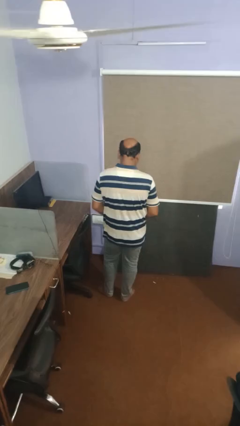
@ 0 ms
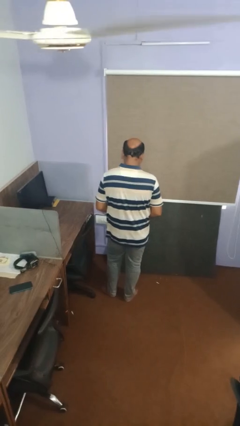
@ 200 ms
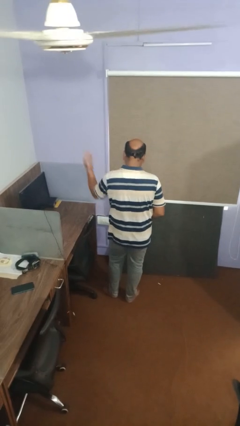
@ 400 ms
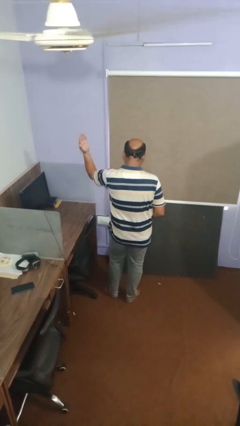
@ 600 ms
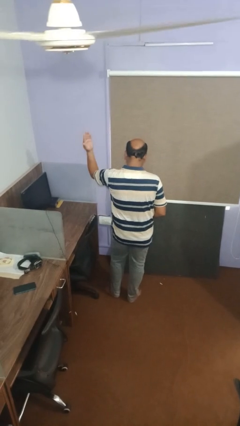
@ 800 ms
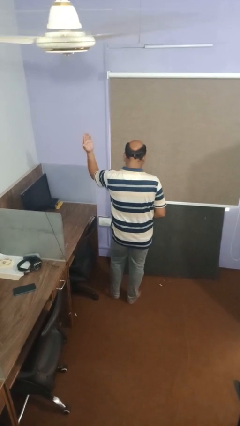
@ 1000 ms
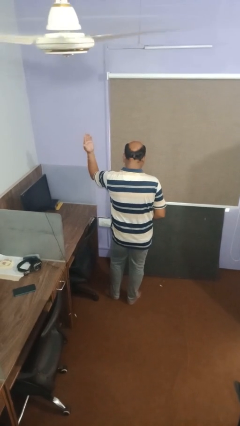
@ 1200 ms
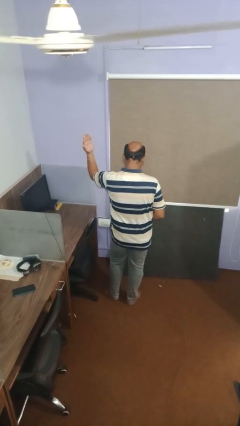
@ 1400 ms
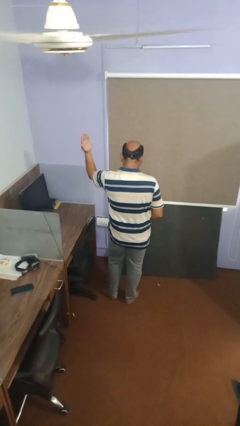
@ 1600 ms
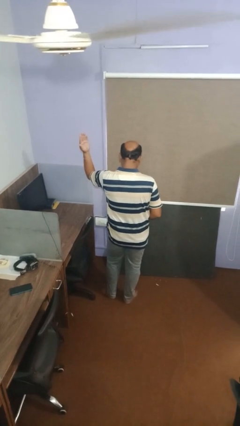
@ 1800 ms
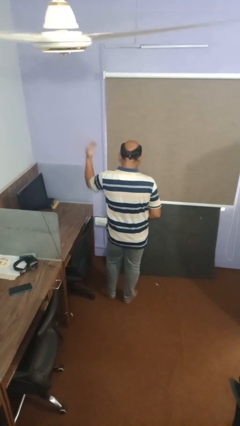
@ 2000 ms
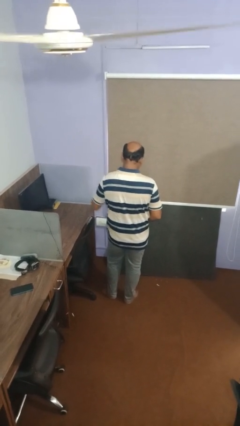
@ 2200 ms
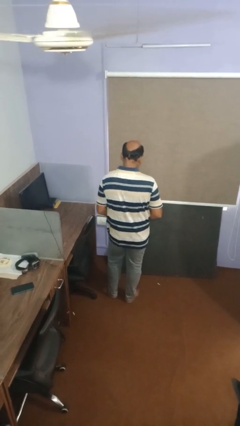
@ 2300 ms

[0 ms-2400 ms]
person gestures swipe left

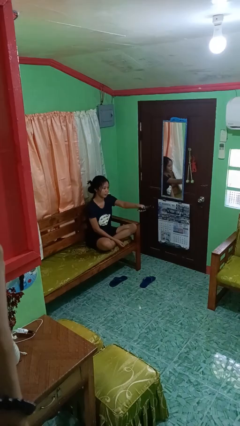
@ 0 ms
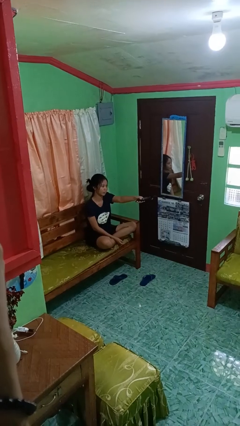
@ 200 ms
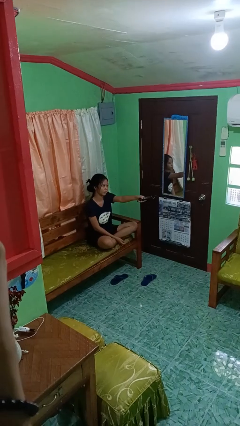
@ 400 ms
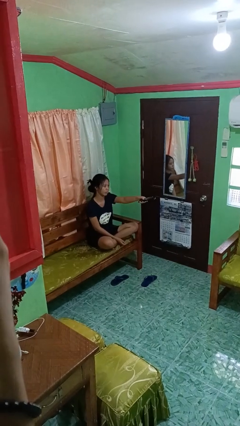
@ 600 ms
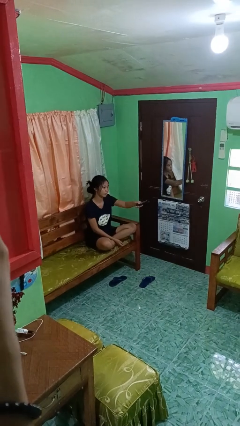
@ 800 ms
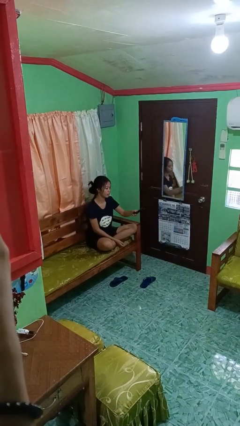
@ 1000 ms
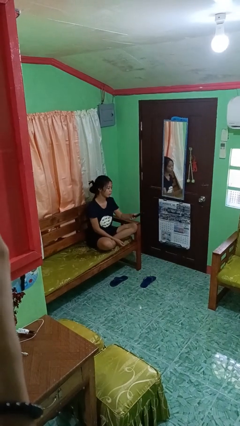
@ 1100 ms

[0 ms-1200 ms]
person uses television remote

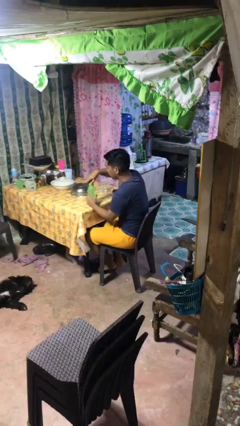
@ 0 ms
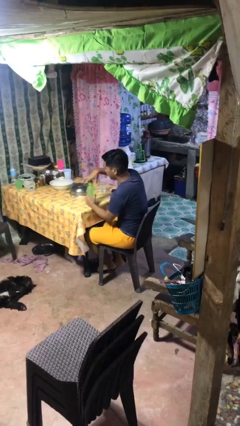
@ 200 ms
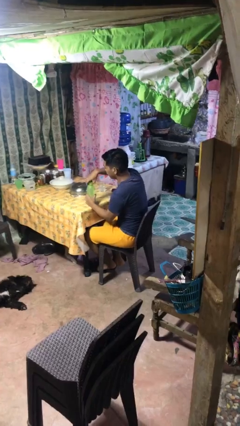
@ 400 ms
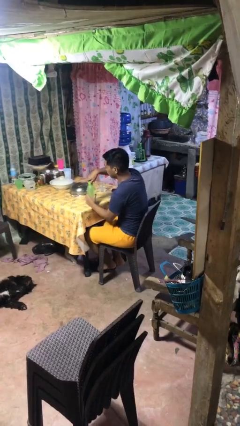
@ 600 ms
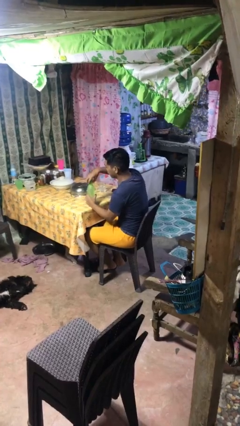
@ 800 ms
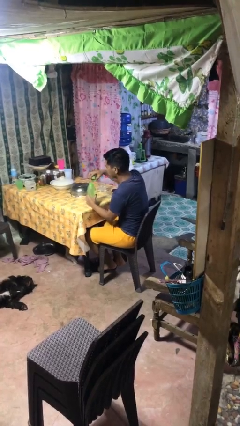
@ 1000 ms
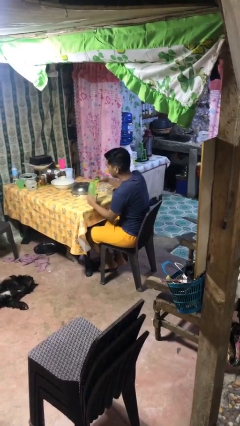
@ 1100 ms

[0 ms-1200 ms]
person unscrews lid from bottle

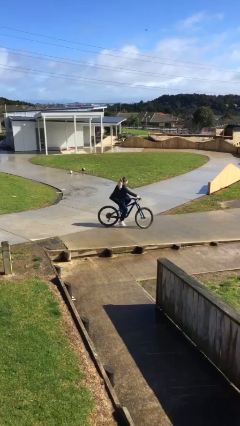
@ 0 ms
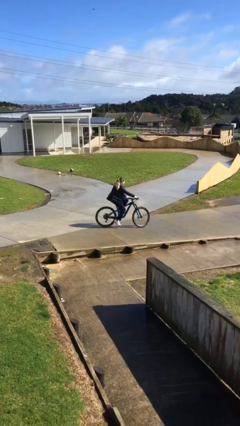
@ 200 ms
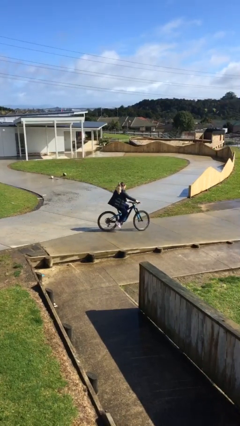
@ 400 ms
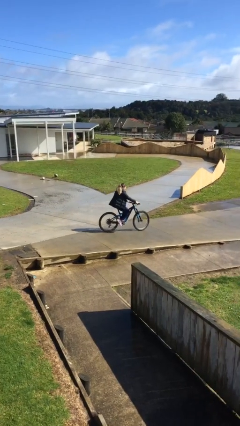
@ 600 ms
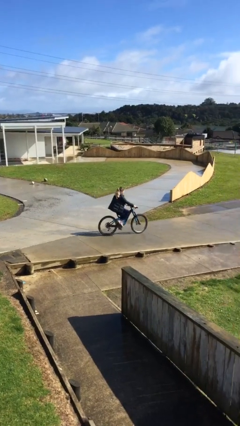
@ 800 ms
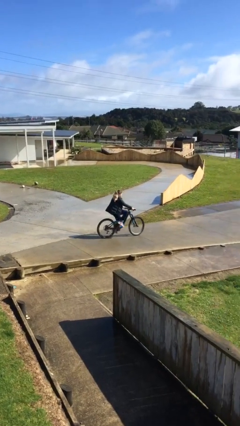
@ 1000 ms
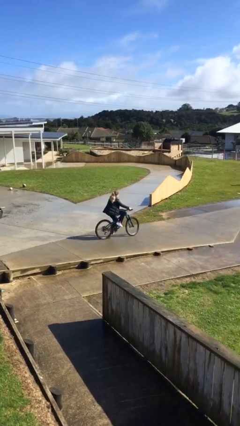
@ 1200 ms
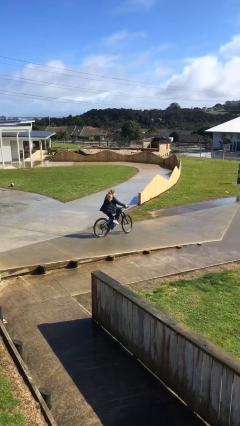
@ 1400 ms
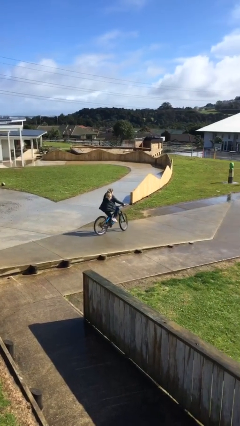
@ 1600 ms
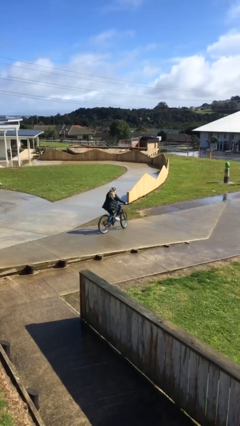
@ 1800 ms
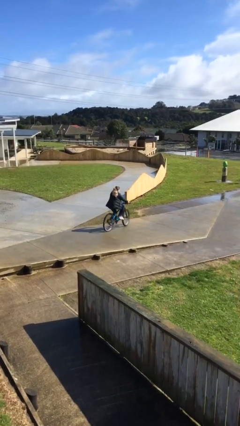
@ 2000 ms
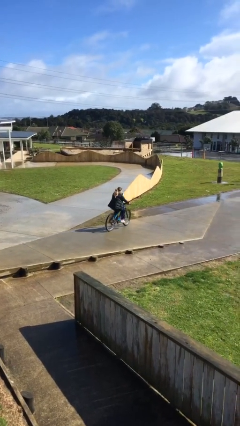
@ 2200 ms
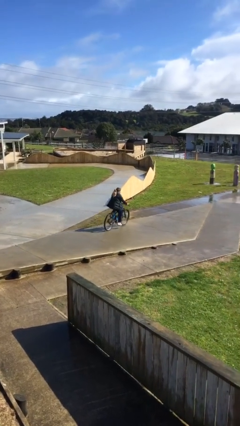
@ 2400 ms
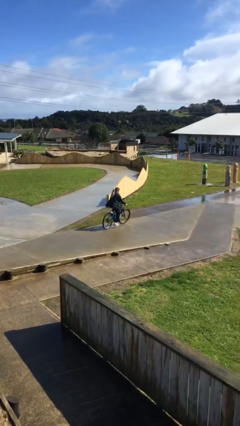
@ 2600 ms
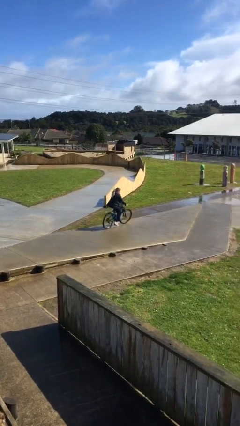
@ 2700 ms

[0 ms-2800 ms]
person rides bicycle

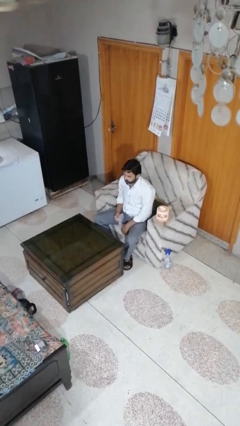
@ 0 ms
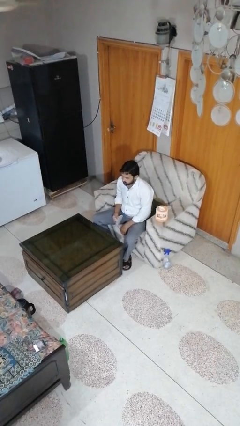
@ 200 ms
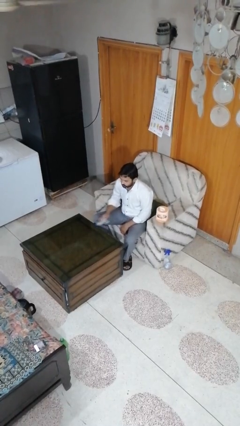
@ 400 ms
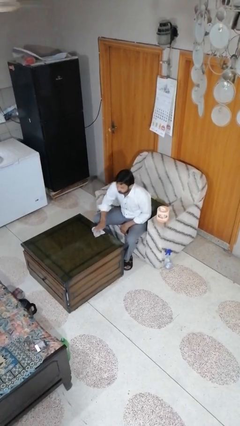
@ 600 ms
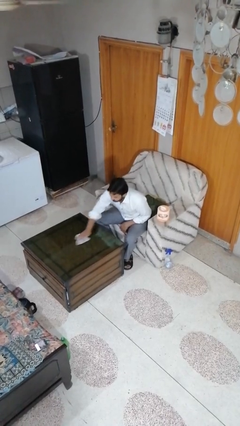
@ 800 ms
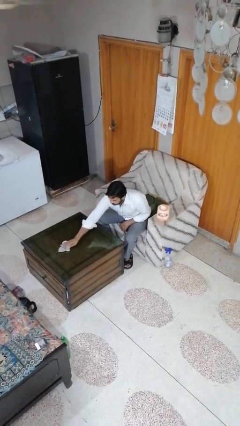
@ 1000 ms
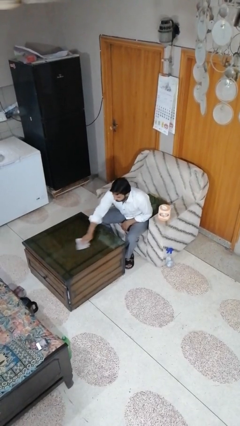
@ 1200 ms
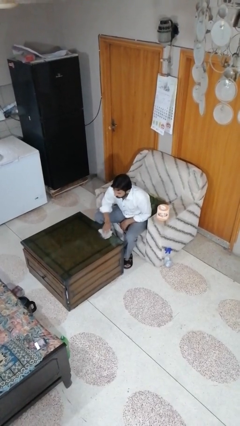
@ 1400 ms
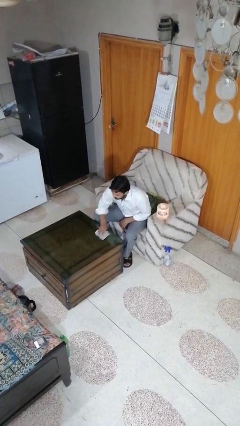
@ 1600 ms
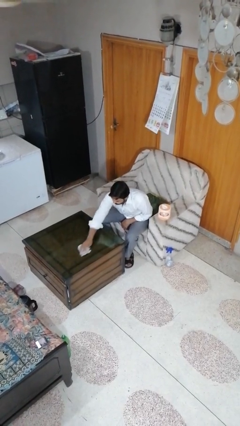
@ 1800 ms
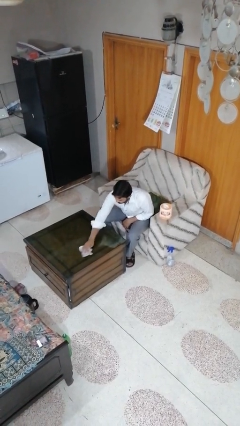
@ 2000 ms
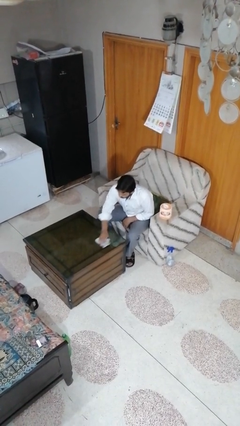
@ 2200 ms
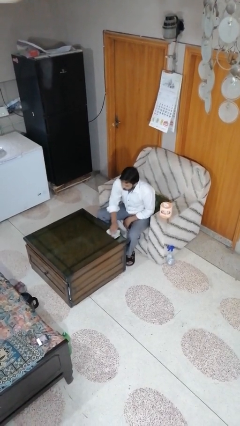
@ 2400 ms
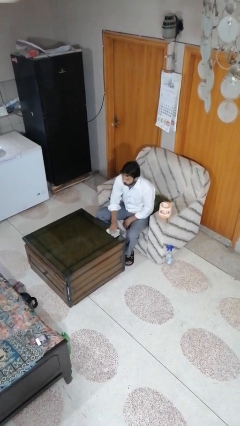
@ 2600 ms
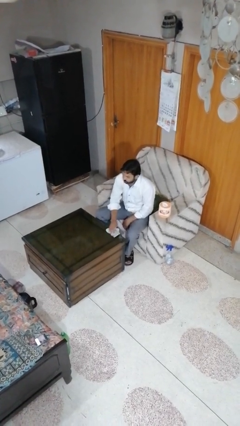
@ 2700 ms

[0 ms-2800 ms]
person cleans table with rag

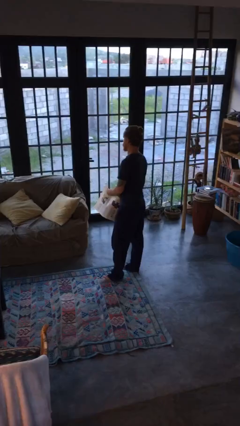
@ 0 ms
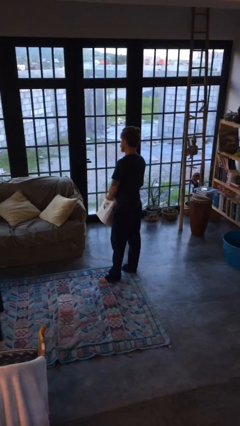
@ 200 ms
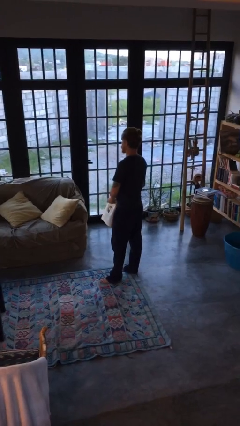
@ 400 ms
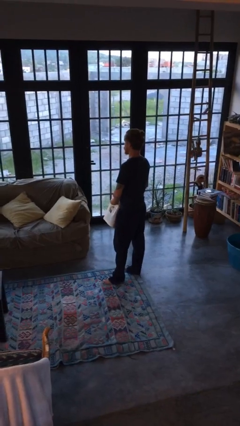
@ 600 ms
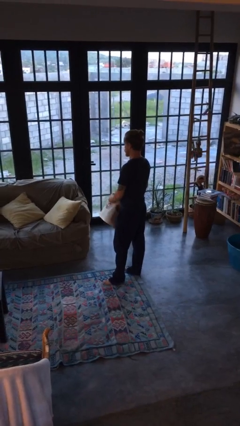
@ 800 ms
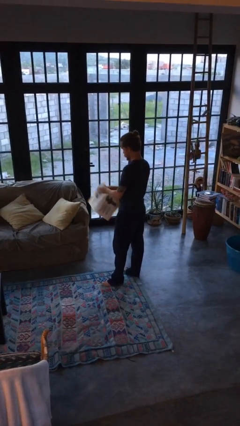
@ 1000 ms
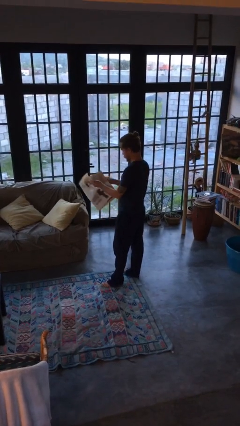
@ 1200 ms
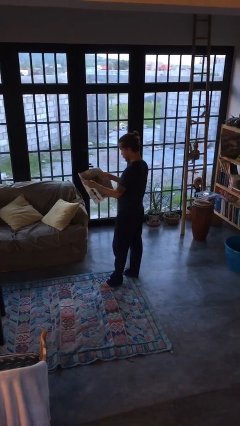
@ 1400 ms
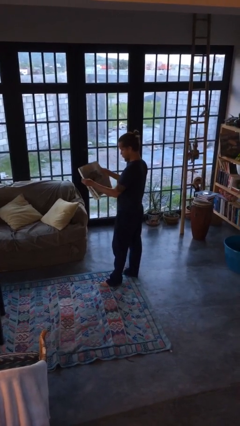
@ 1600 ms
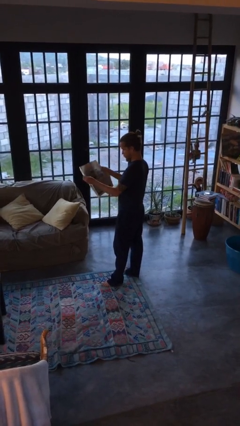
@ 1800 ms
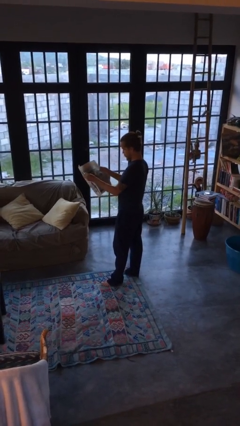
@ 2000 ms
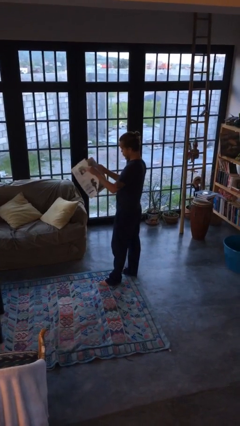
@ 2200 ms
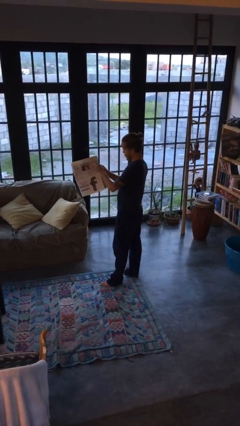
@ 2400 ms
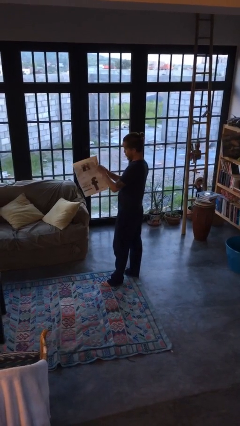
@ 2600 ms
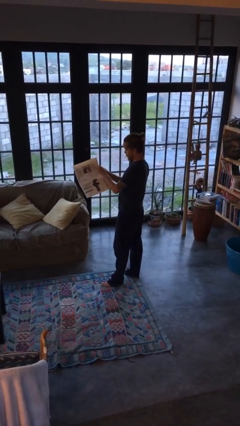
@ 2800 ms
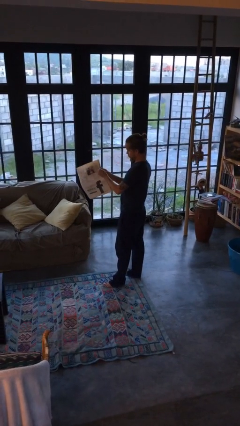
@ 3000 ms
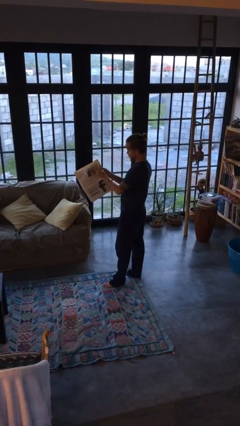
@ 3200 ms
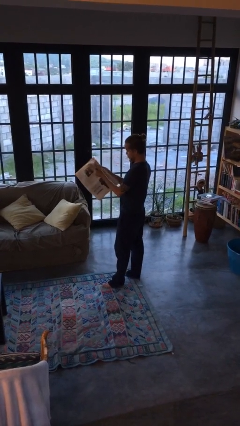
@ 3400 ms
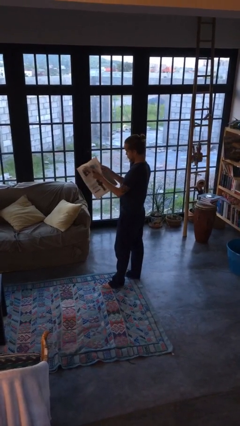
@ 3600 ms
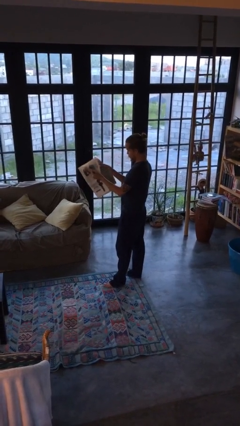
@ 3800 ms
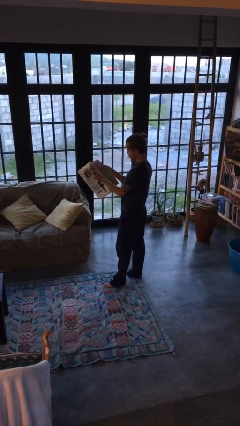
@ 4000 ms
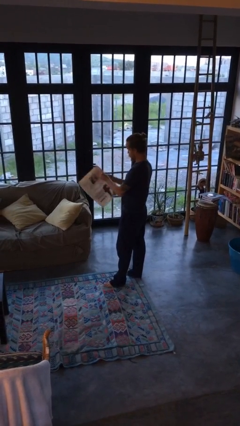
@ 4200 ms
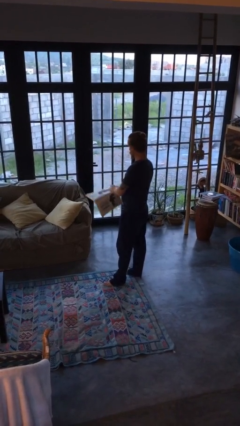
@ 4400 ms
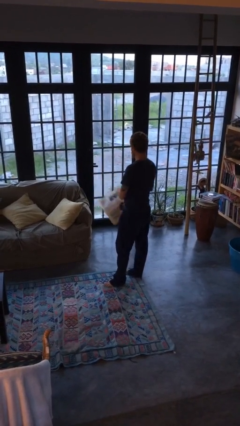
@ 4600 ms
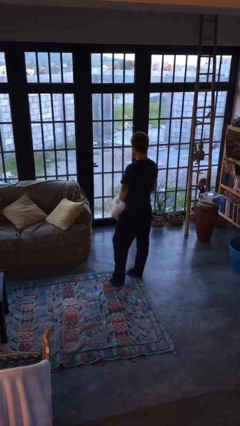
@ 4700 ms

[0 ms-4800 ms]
person reads newspaper

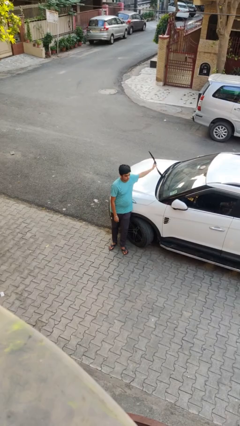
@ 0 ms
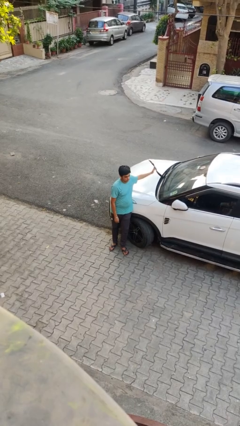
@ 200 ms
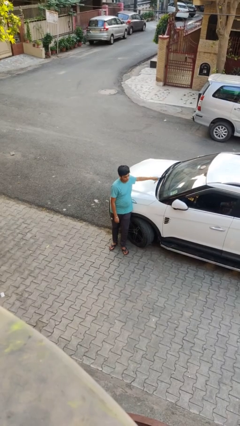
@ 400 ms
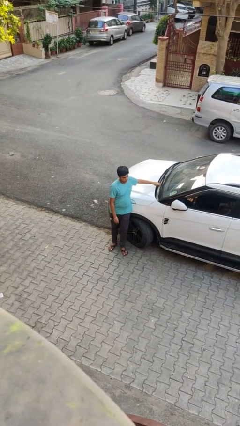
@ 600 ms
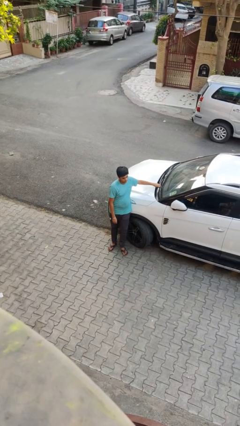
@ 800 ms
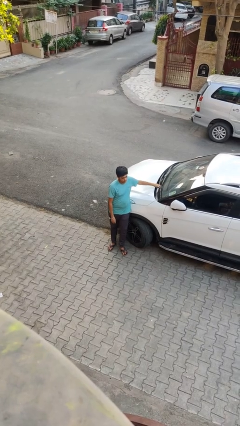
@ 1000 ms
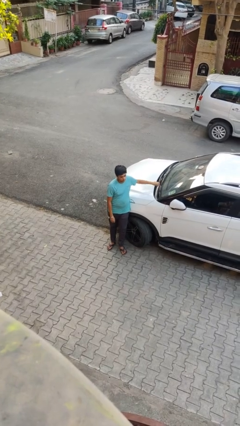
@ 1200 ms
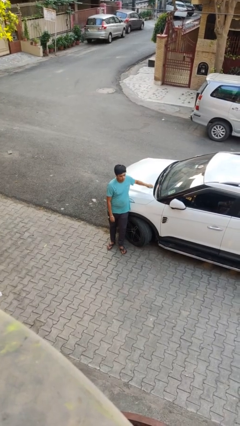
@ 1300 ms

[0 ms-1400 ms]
person flips down car wipers

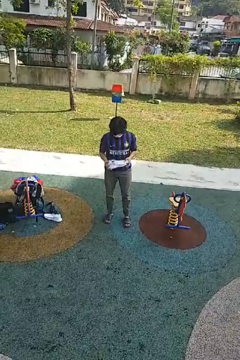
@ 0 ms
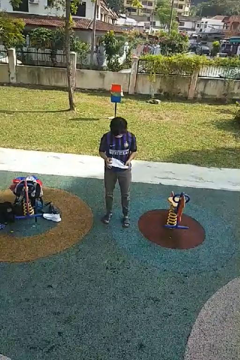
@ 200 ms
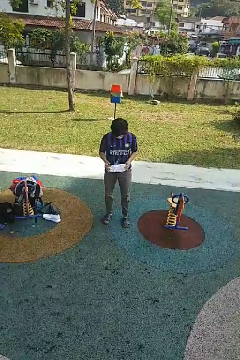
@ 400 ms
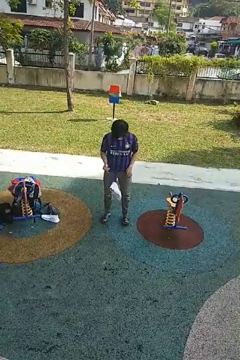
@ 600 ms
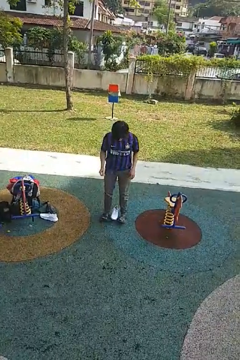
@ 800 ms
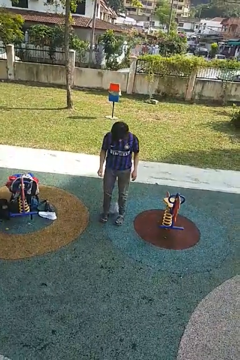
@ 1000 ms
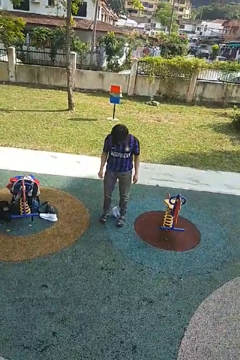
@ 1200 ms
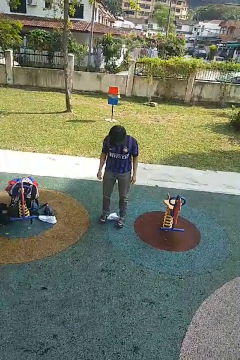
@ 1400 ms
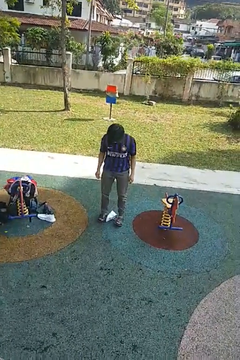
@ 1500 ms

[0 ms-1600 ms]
person drops object
